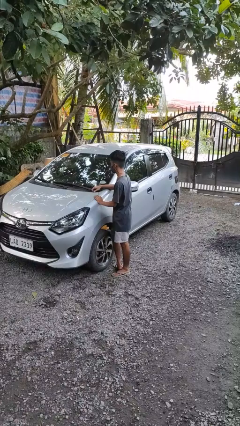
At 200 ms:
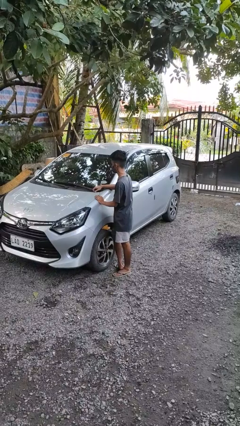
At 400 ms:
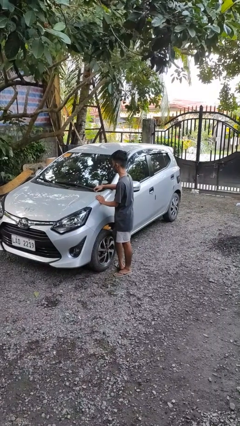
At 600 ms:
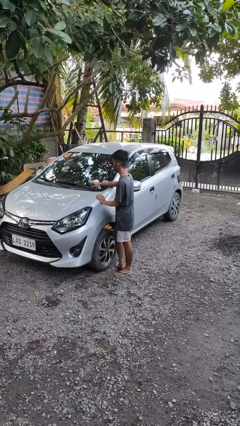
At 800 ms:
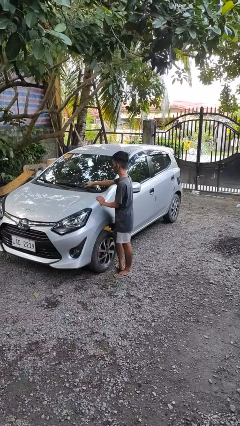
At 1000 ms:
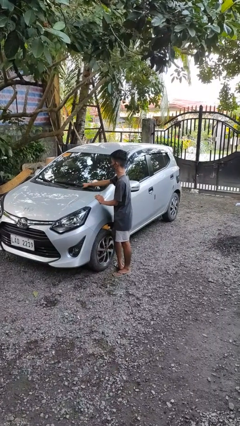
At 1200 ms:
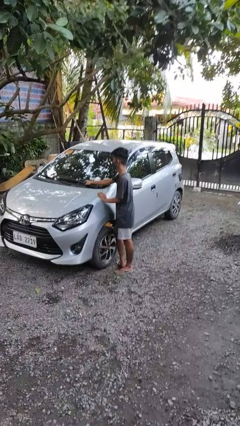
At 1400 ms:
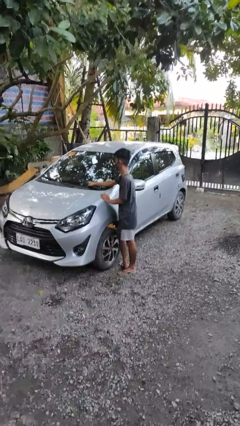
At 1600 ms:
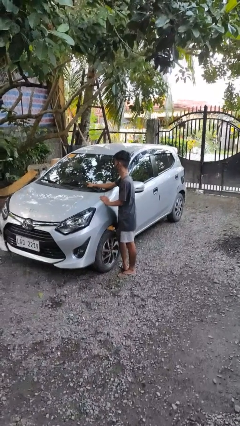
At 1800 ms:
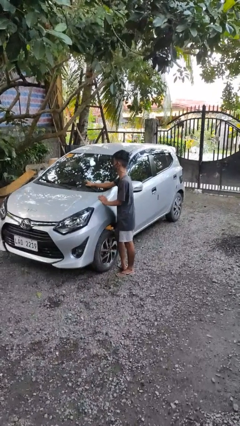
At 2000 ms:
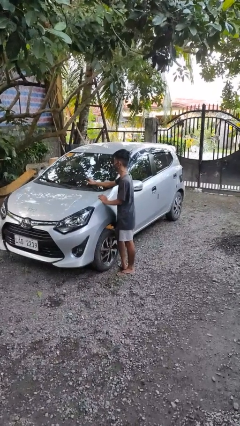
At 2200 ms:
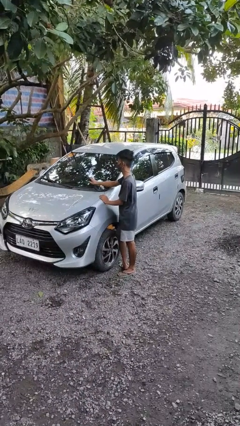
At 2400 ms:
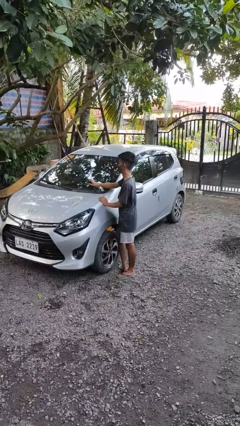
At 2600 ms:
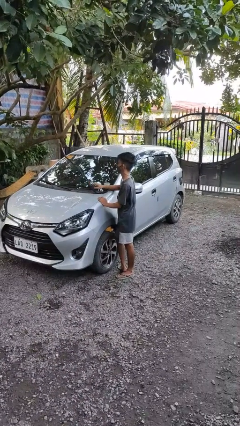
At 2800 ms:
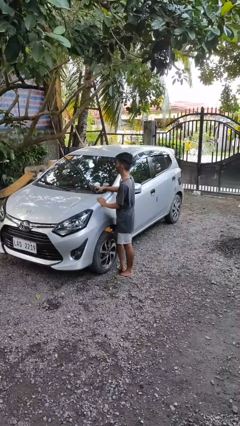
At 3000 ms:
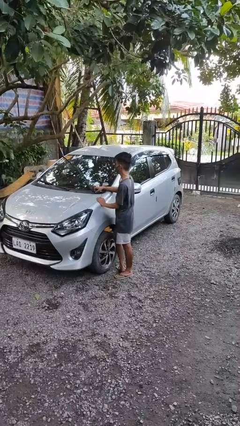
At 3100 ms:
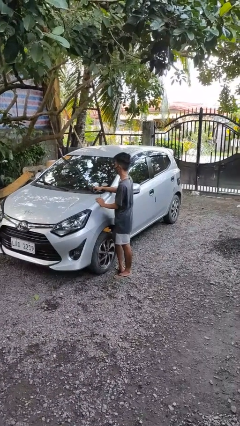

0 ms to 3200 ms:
person flips up car wipers

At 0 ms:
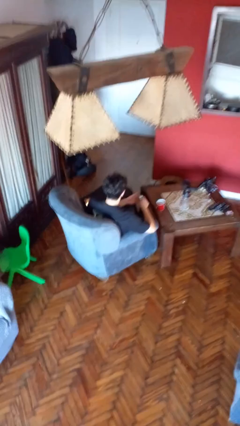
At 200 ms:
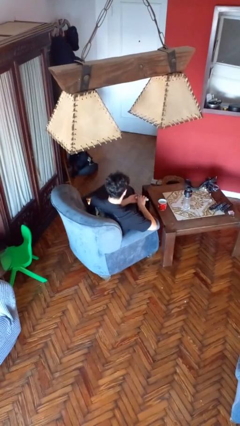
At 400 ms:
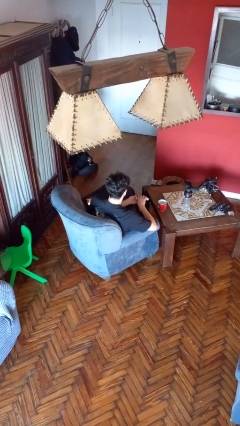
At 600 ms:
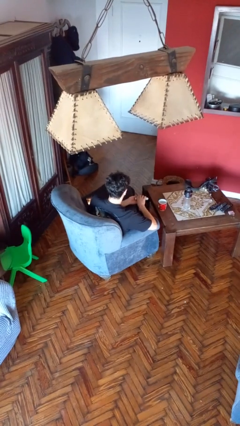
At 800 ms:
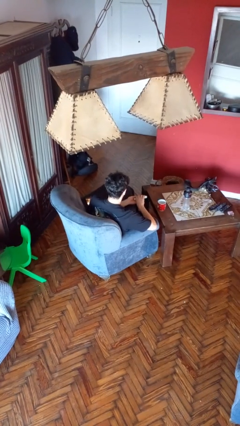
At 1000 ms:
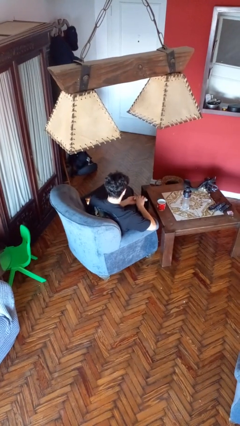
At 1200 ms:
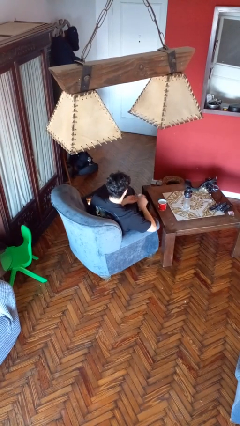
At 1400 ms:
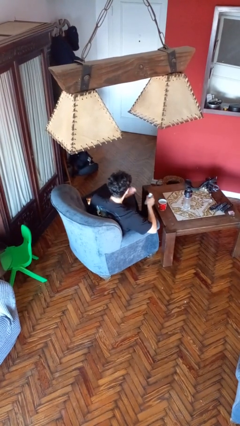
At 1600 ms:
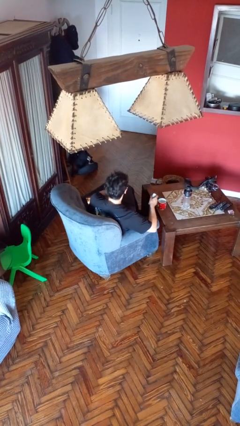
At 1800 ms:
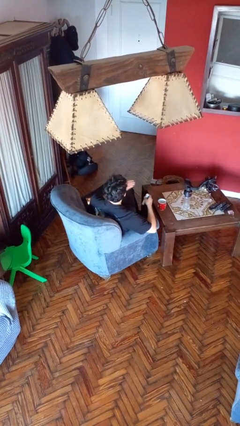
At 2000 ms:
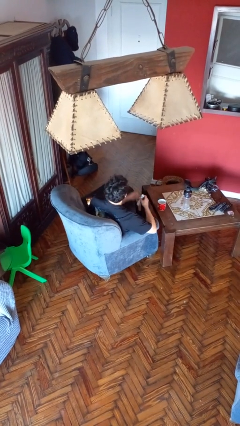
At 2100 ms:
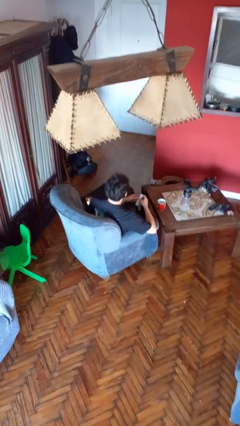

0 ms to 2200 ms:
person takes medicine pills

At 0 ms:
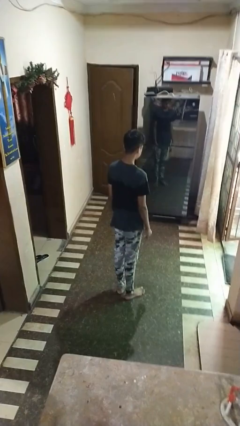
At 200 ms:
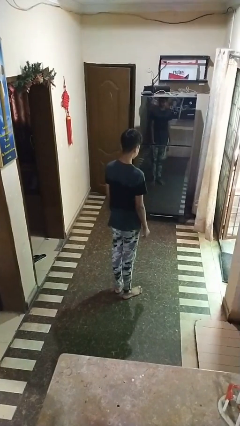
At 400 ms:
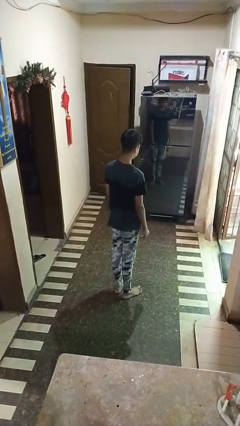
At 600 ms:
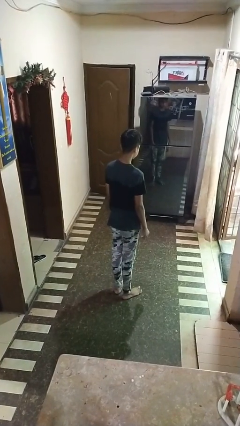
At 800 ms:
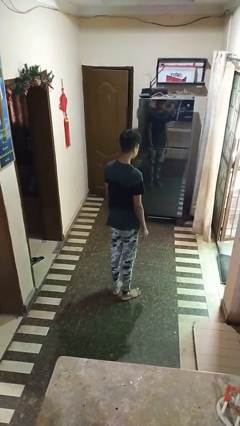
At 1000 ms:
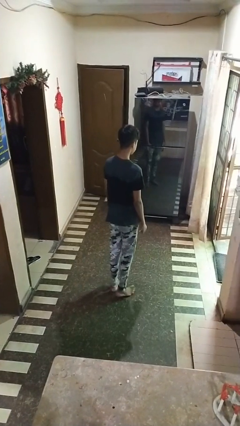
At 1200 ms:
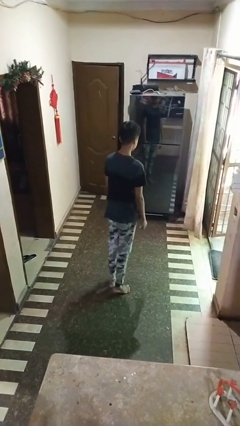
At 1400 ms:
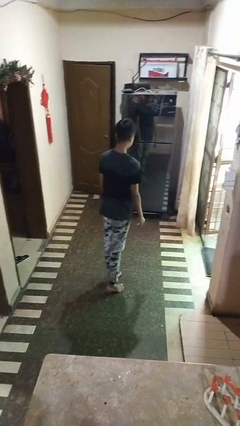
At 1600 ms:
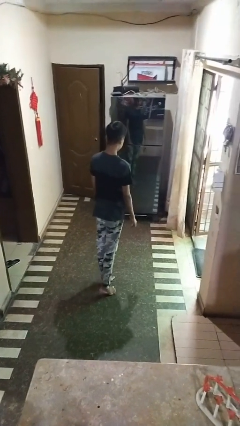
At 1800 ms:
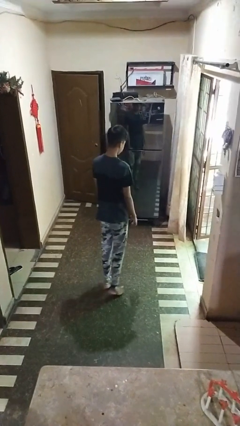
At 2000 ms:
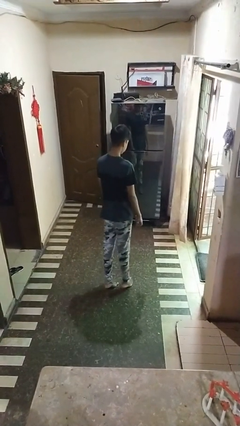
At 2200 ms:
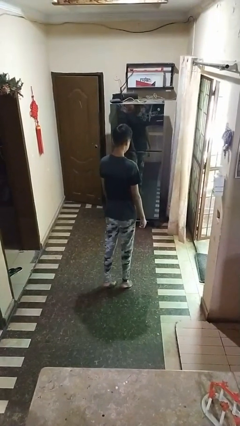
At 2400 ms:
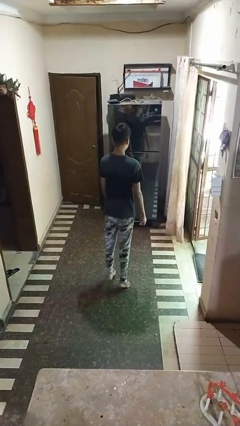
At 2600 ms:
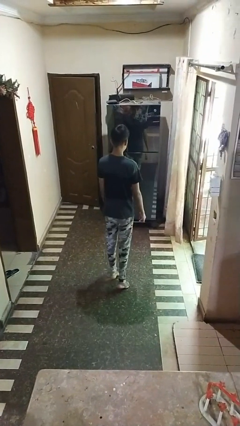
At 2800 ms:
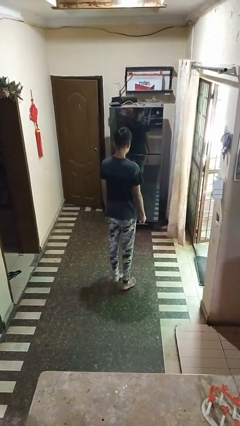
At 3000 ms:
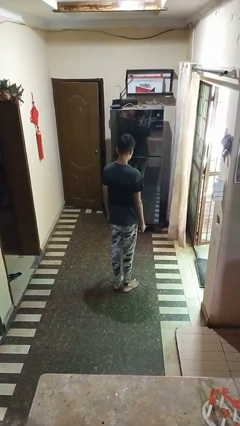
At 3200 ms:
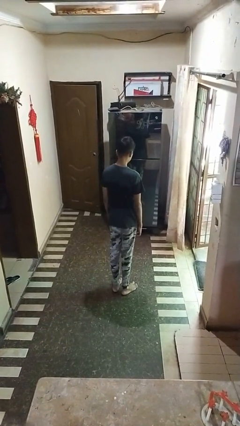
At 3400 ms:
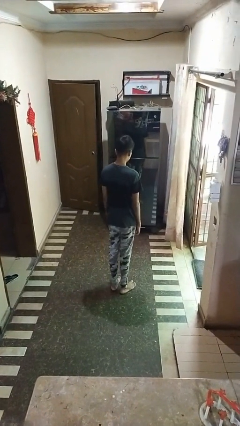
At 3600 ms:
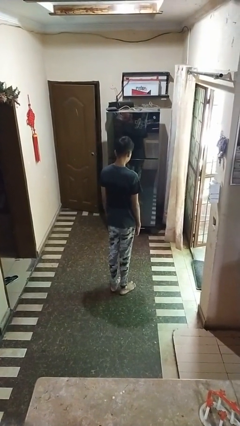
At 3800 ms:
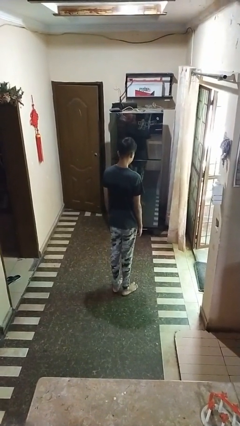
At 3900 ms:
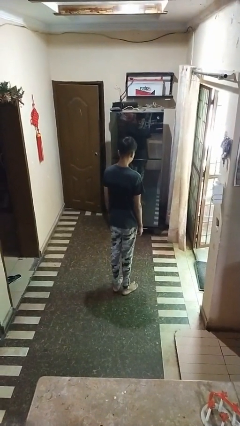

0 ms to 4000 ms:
person walks tiptoe

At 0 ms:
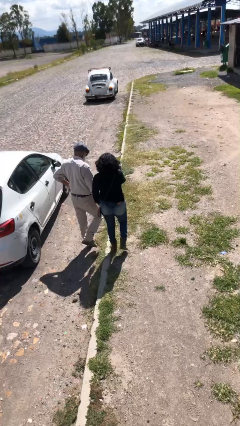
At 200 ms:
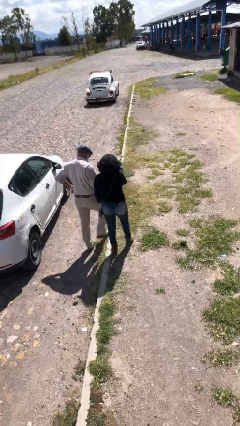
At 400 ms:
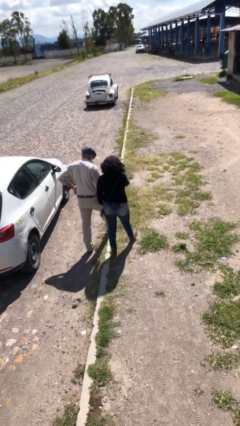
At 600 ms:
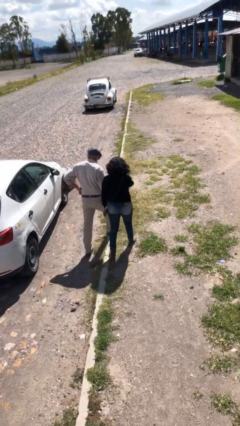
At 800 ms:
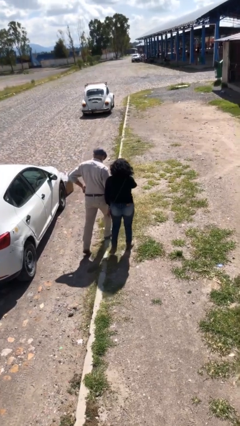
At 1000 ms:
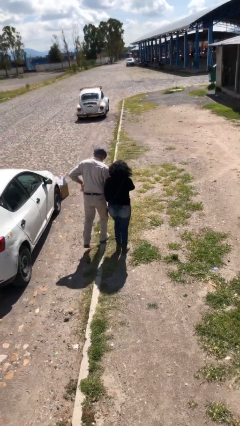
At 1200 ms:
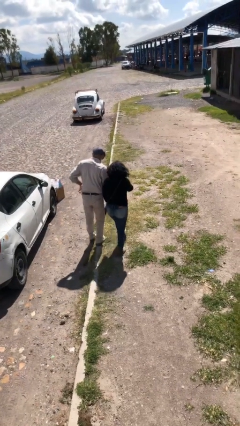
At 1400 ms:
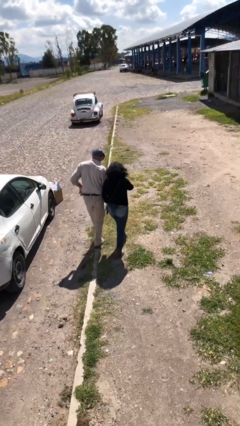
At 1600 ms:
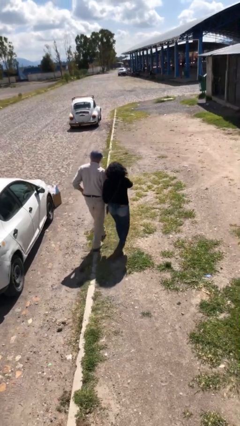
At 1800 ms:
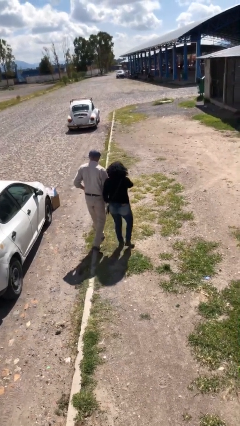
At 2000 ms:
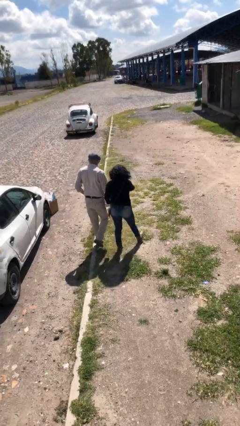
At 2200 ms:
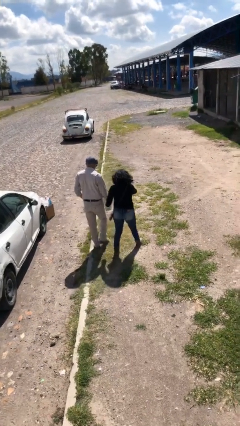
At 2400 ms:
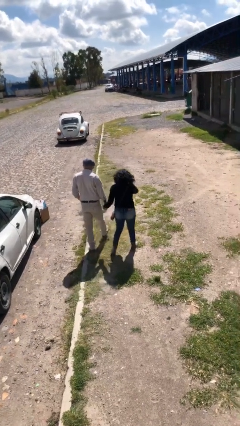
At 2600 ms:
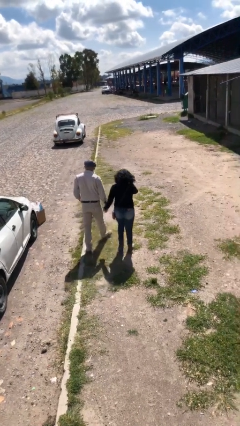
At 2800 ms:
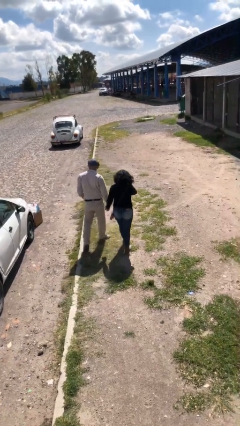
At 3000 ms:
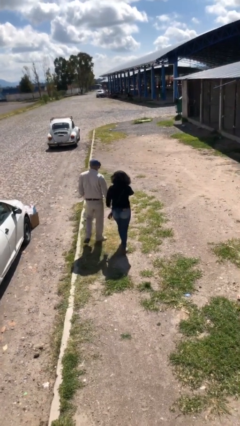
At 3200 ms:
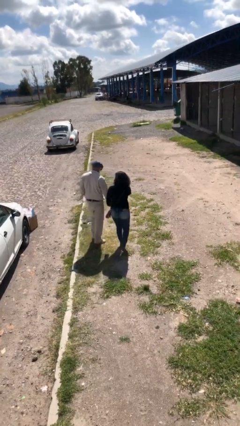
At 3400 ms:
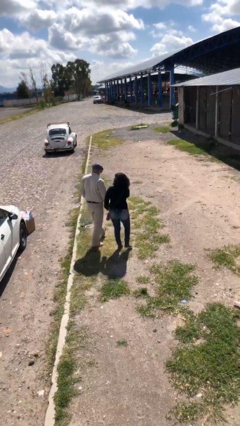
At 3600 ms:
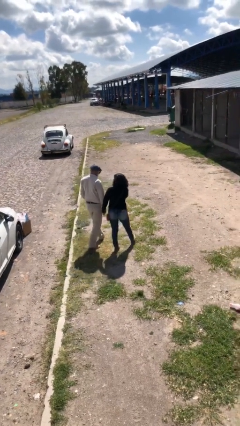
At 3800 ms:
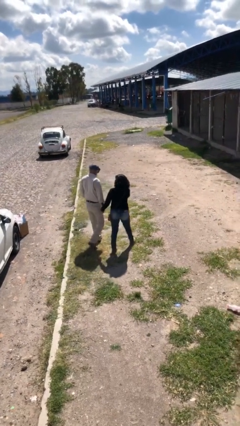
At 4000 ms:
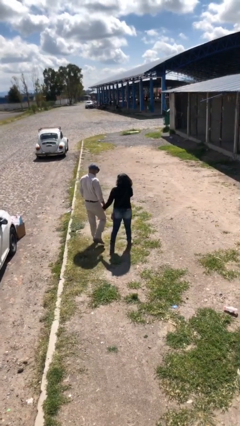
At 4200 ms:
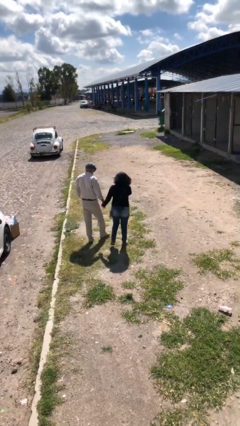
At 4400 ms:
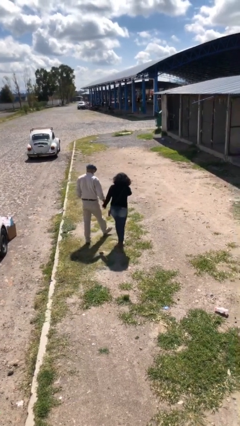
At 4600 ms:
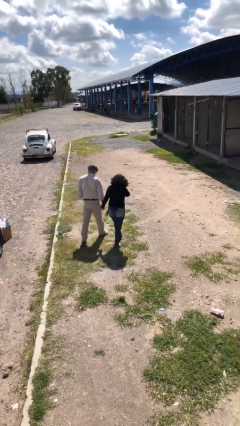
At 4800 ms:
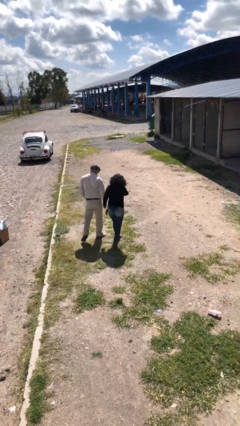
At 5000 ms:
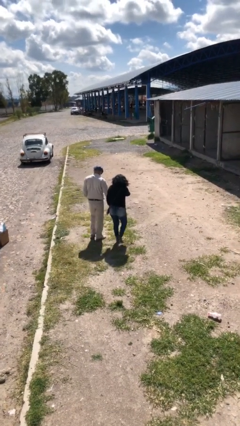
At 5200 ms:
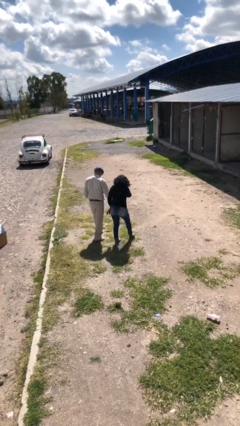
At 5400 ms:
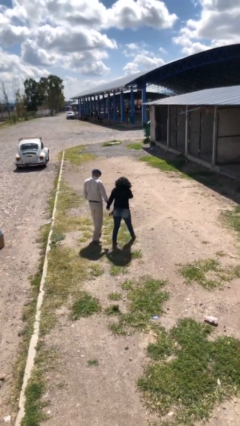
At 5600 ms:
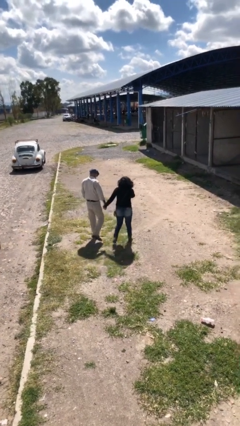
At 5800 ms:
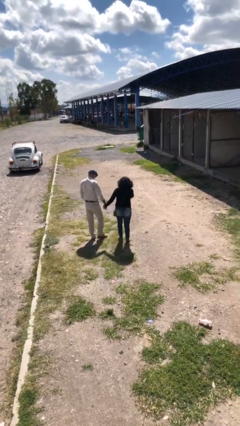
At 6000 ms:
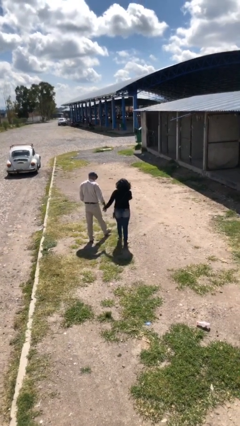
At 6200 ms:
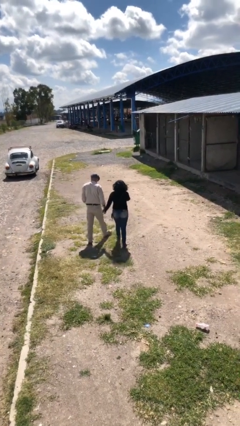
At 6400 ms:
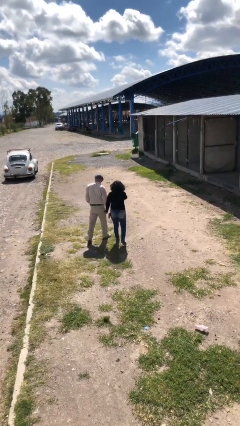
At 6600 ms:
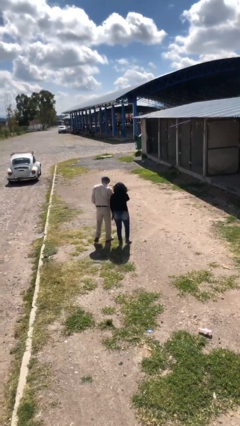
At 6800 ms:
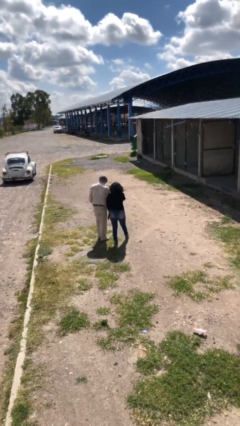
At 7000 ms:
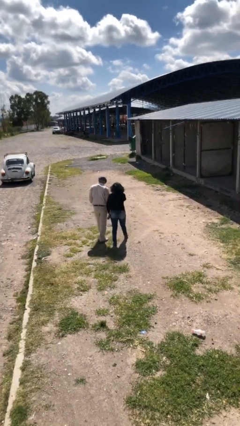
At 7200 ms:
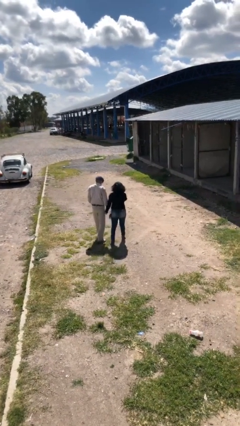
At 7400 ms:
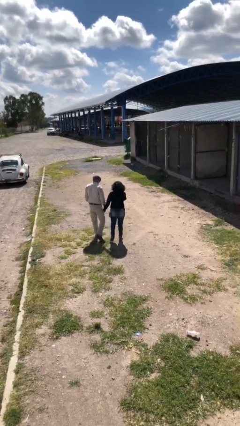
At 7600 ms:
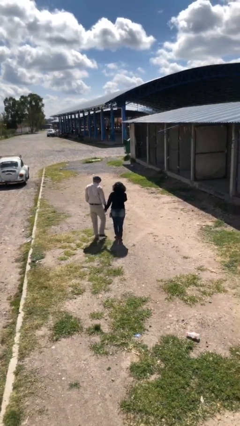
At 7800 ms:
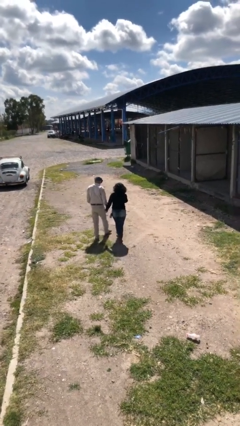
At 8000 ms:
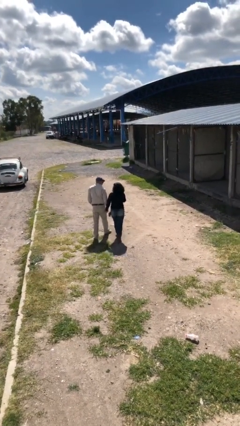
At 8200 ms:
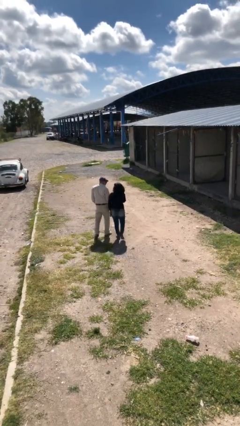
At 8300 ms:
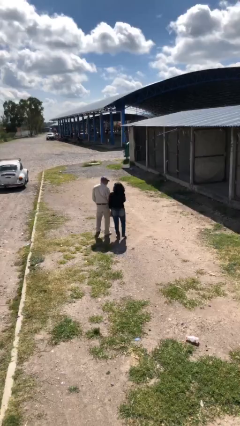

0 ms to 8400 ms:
person holds hand
